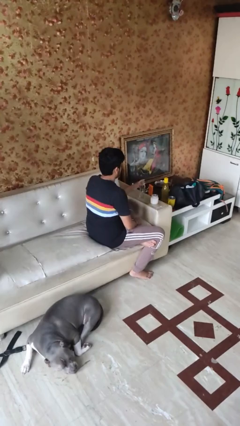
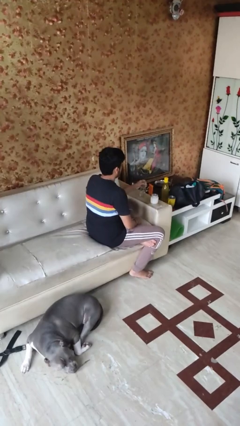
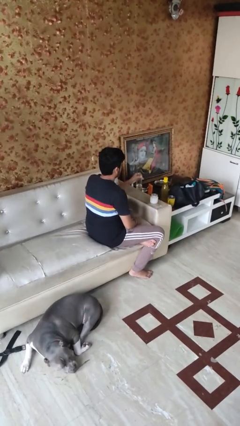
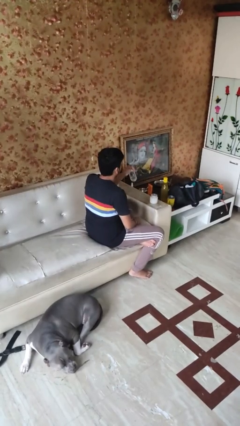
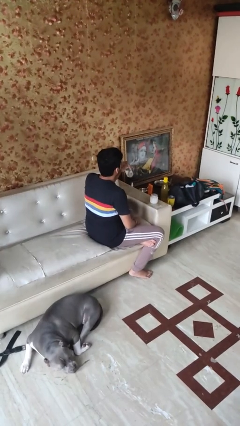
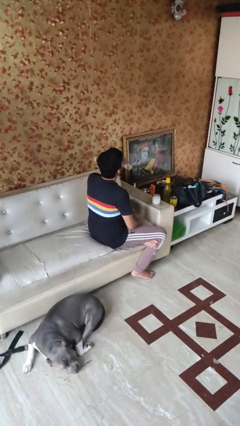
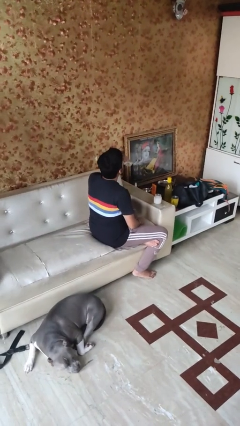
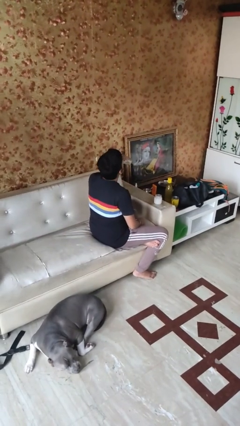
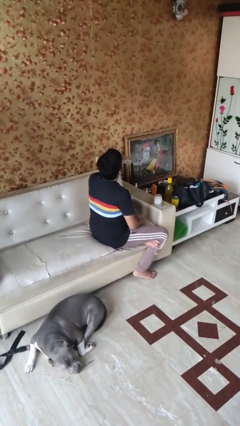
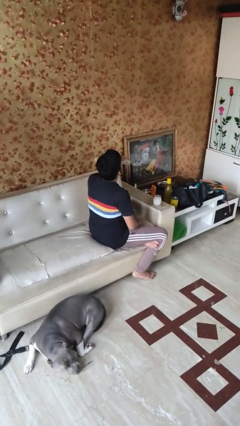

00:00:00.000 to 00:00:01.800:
person drinks from cup

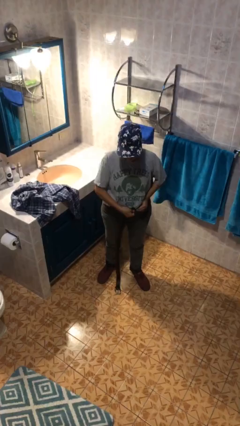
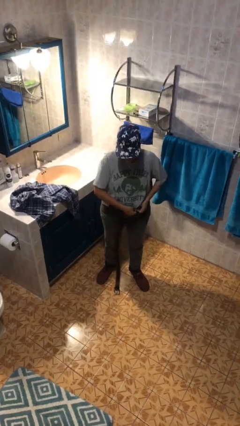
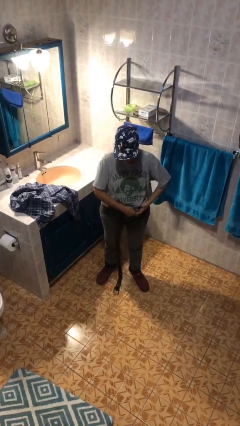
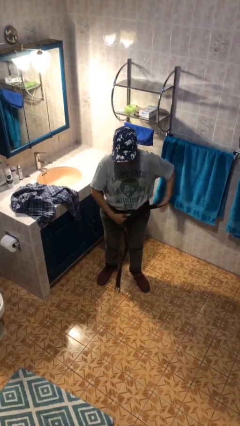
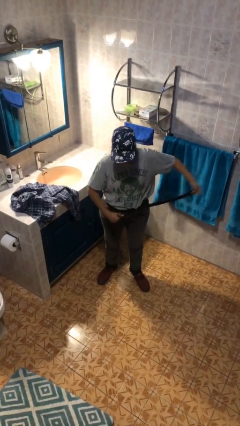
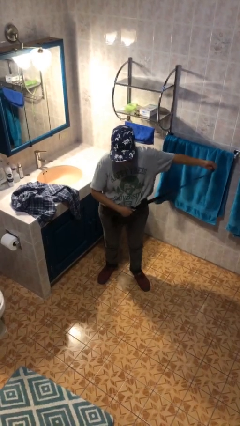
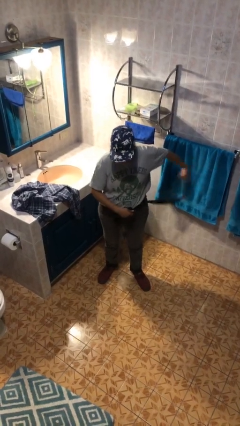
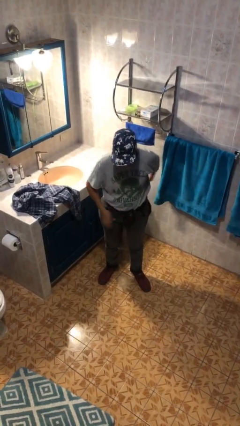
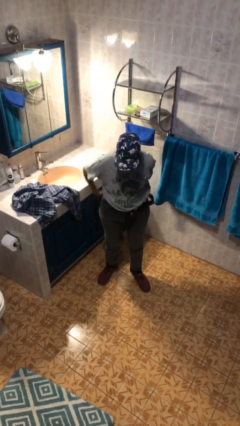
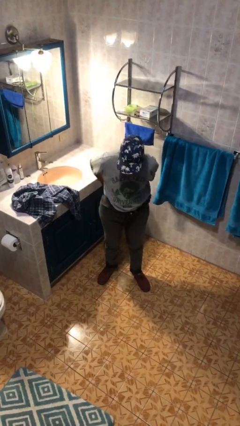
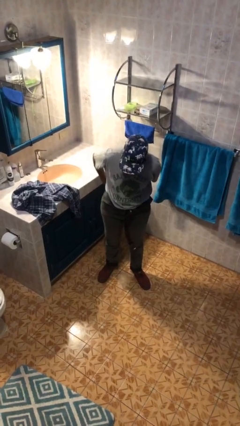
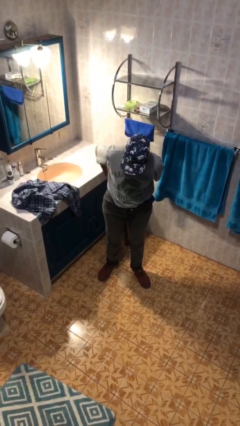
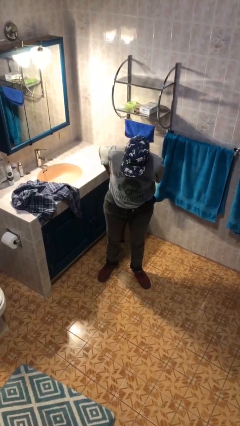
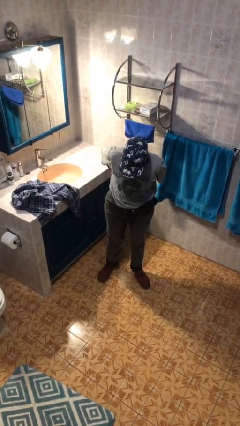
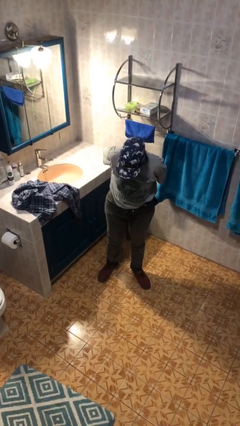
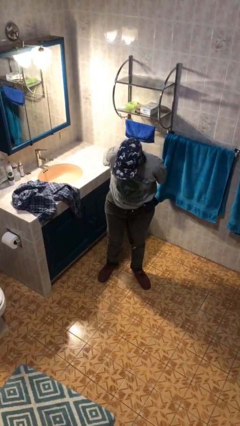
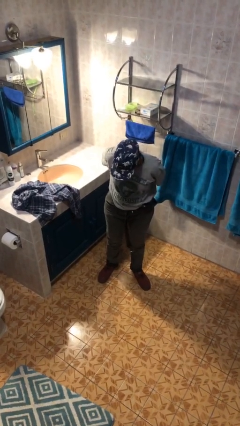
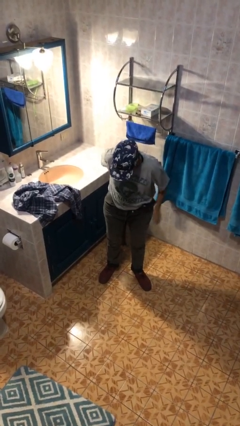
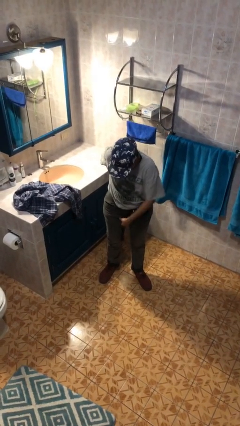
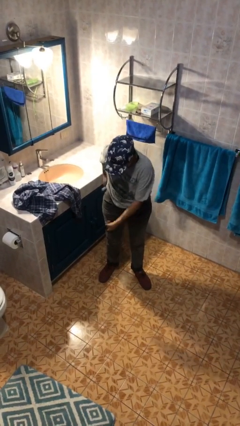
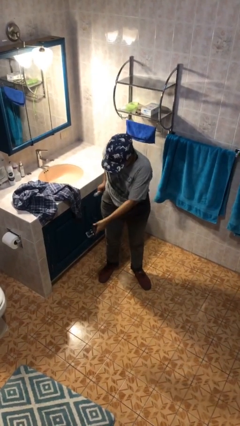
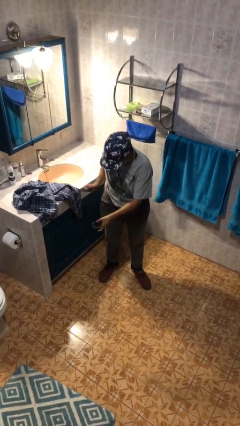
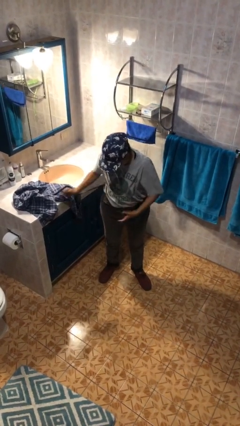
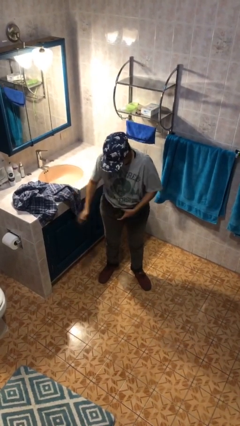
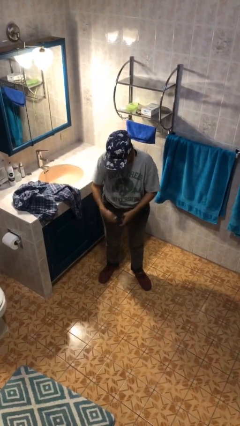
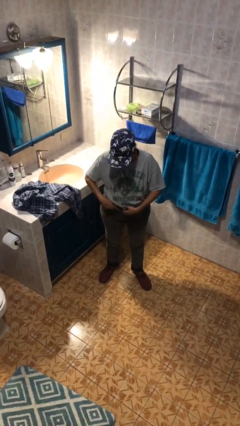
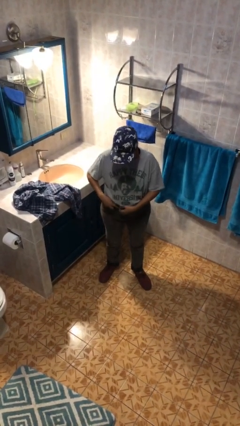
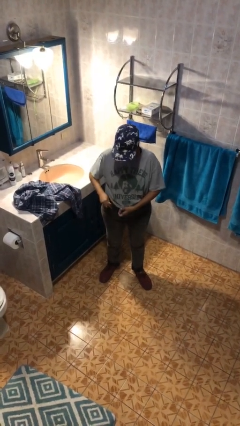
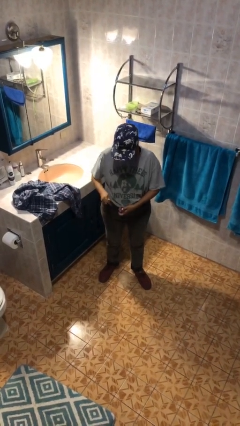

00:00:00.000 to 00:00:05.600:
person puts on belt

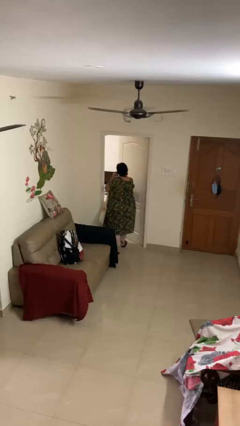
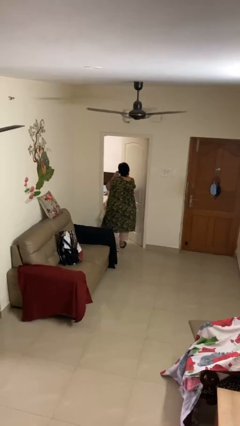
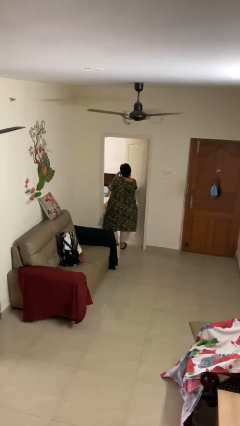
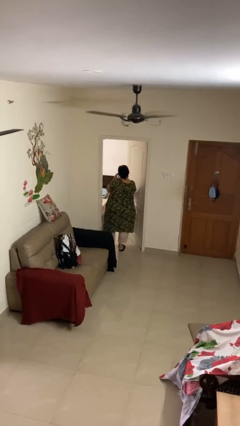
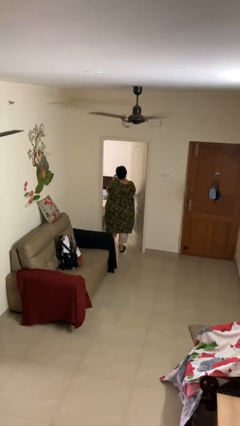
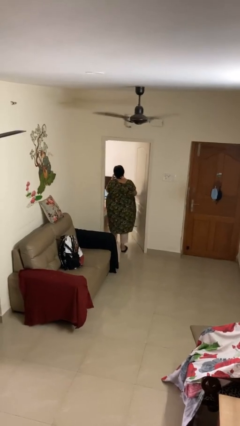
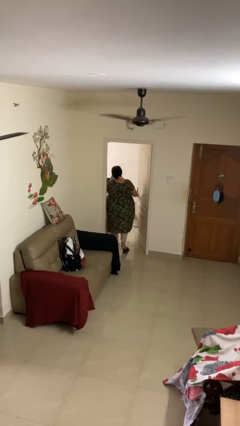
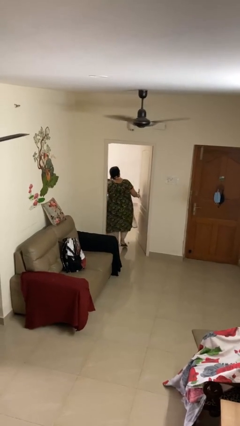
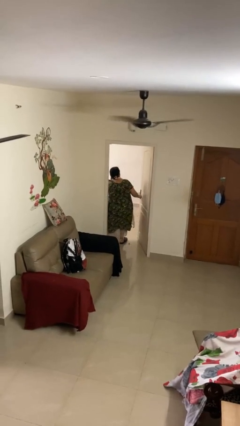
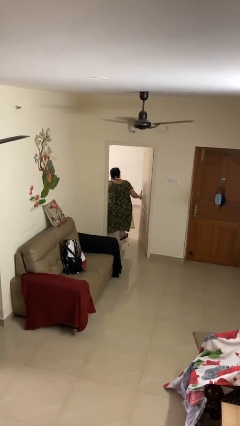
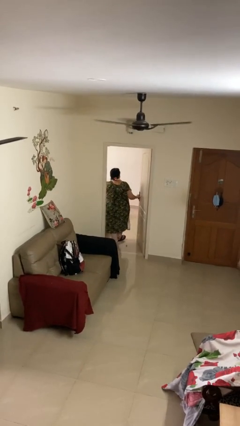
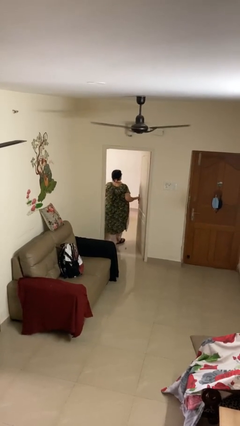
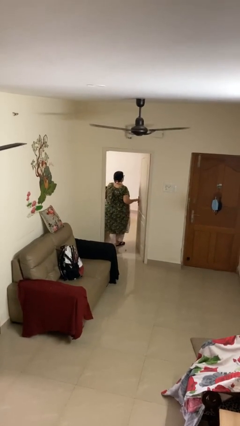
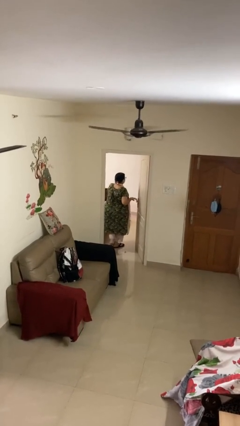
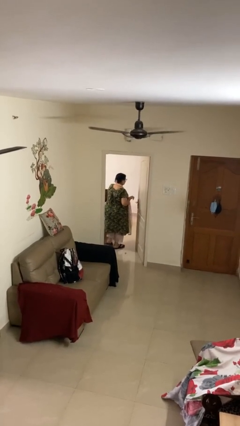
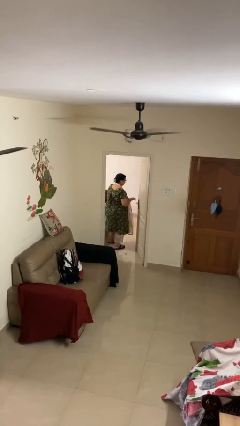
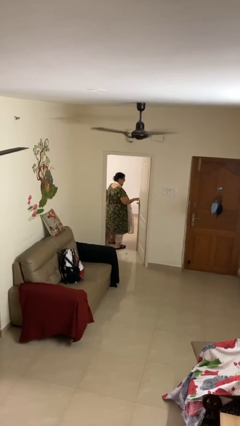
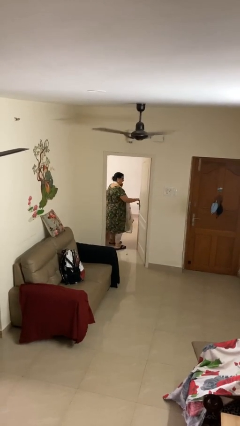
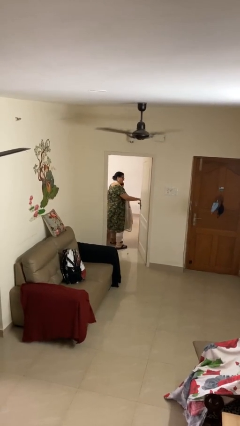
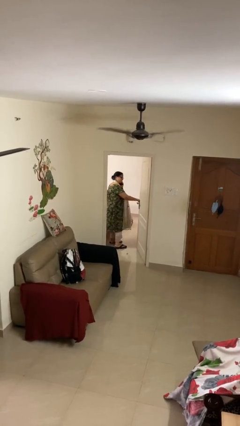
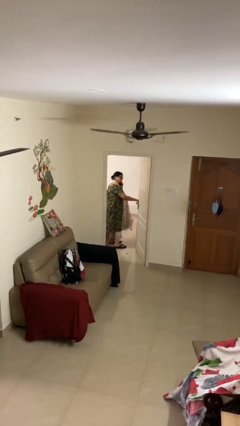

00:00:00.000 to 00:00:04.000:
person exits scene through structure

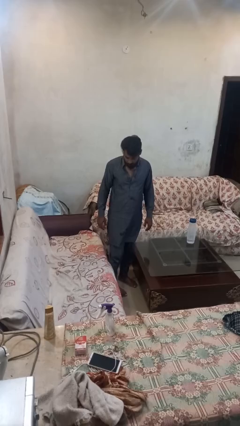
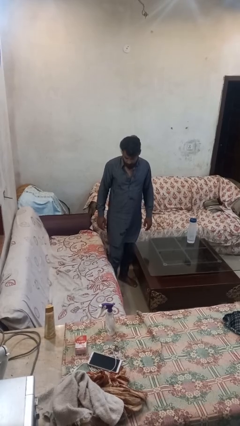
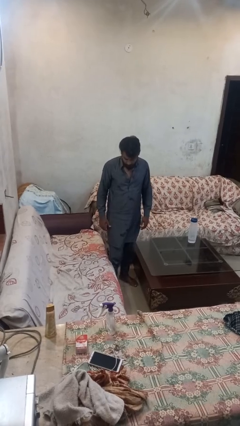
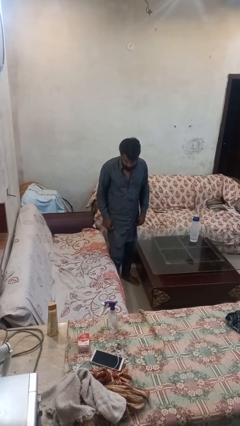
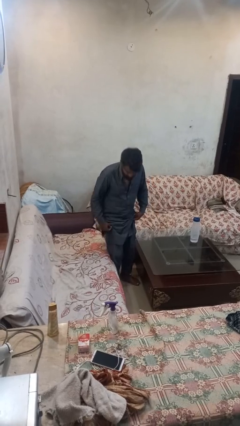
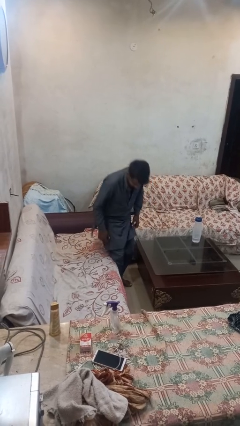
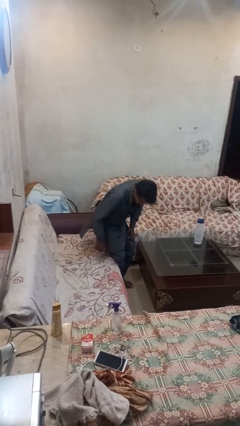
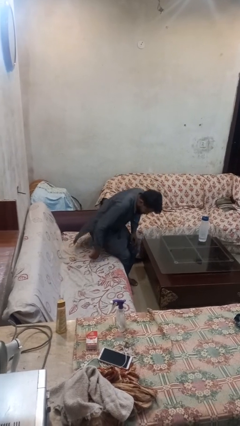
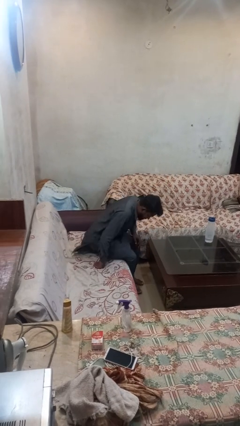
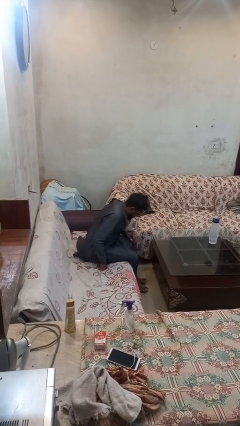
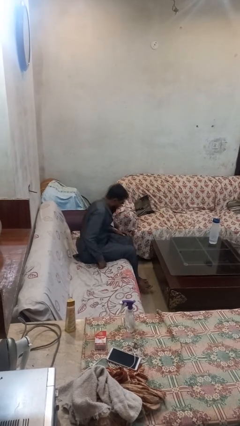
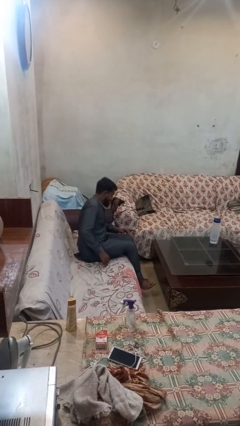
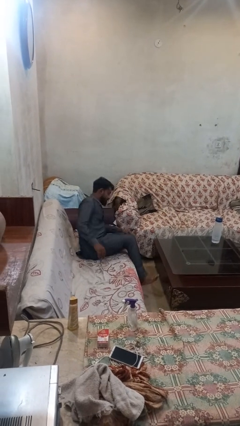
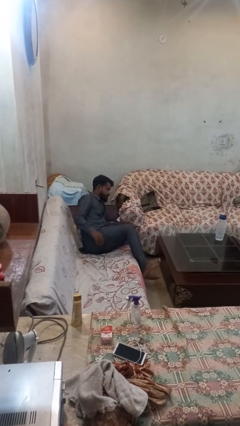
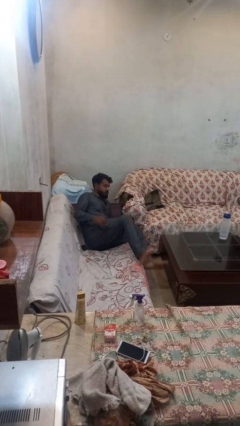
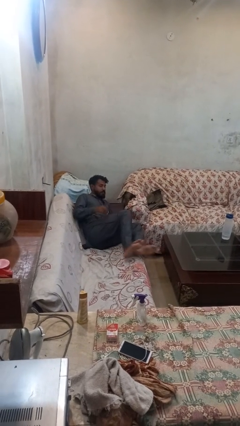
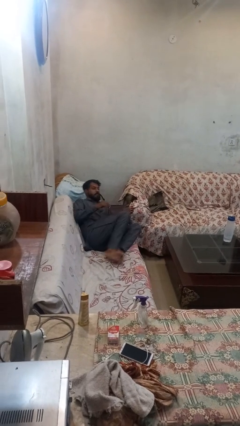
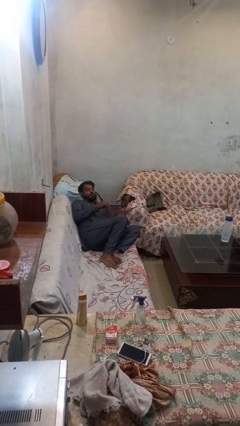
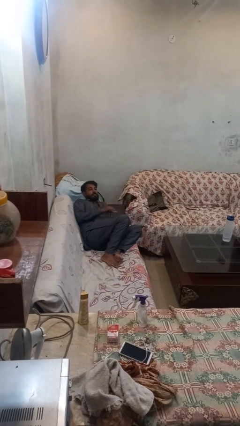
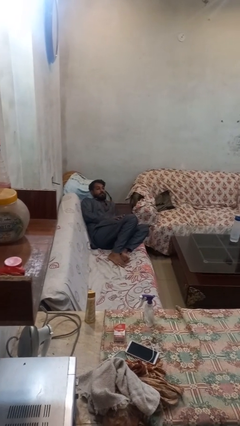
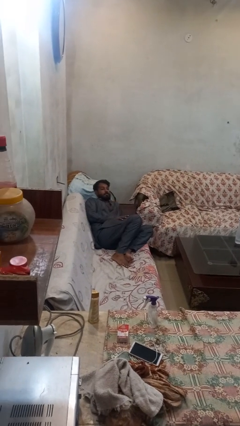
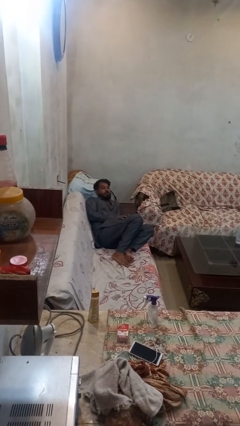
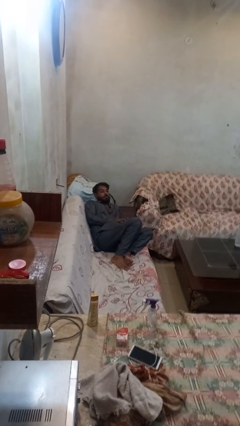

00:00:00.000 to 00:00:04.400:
person lies down on couch

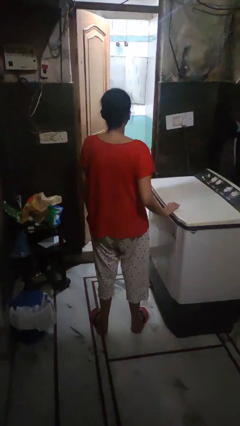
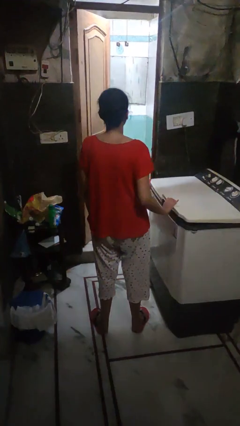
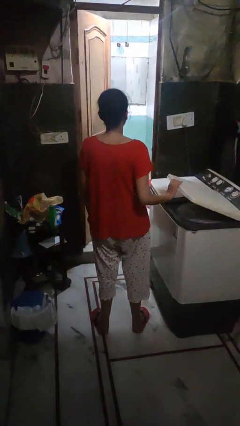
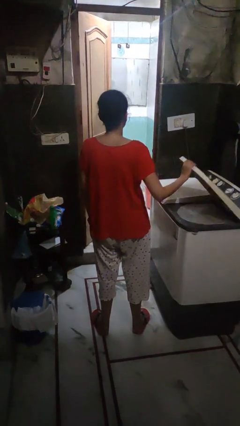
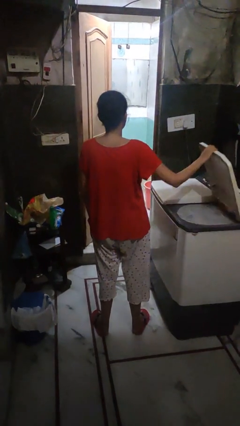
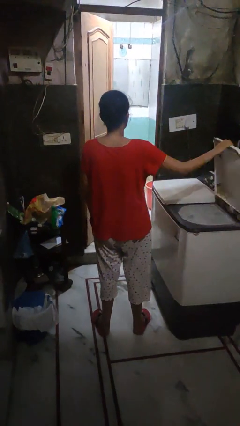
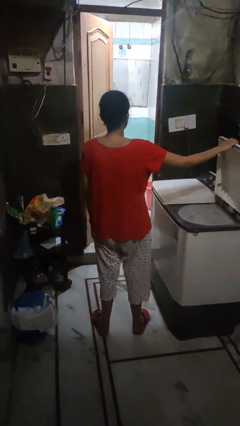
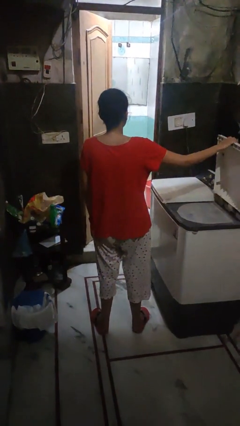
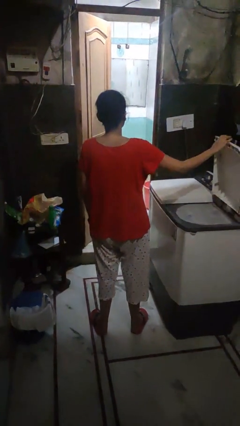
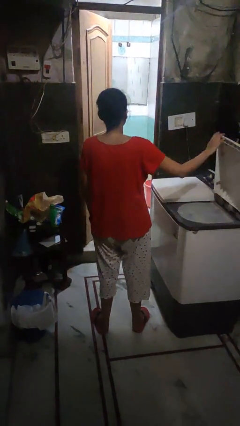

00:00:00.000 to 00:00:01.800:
person opens clothes washer
